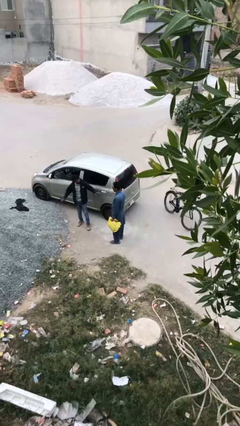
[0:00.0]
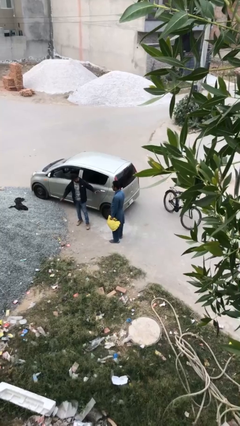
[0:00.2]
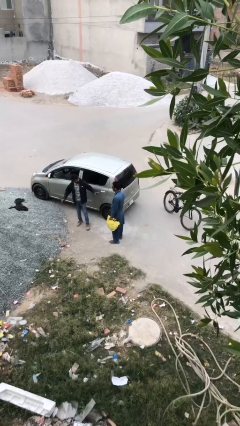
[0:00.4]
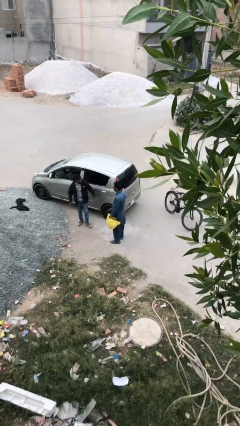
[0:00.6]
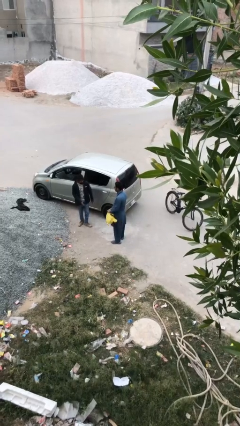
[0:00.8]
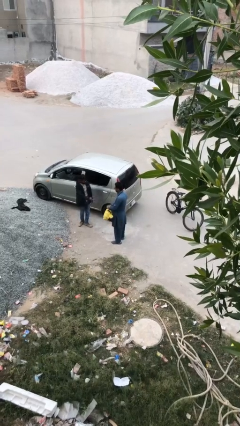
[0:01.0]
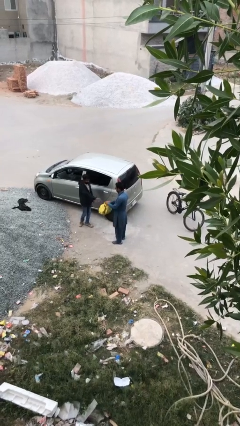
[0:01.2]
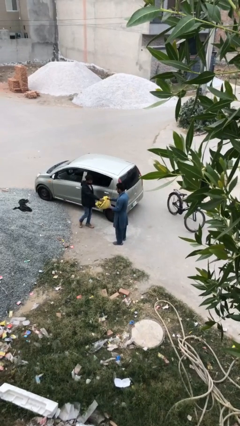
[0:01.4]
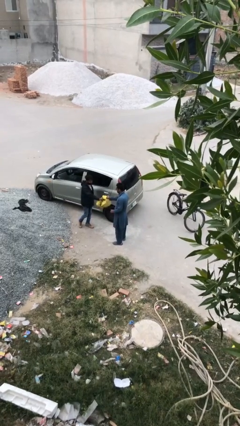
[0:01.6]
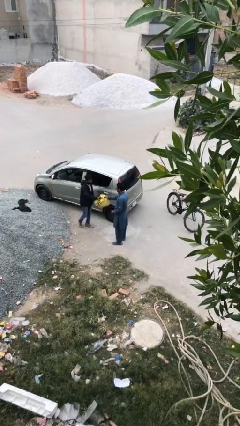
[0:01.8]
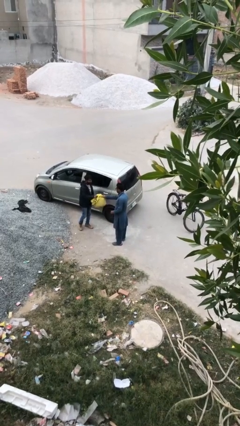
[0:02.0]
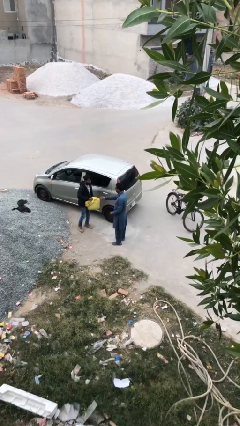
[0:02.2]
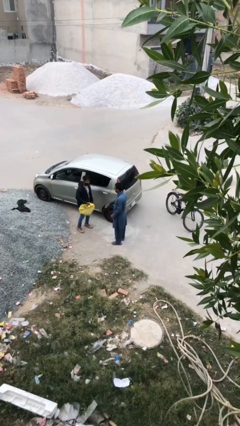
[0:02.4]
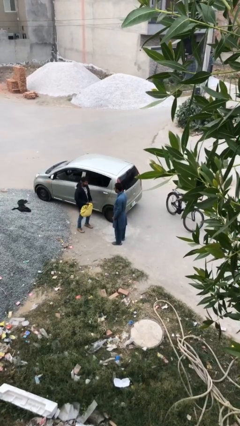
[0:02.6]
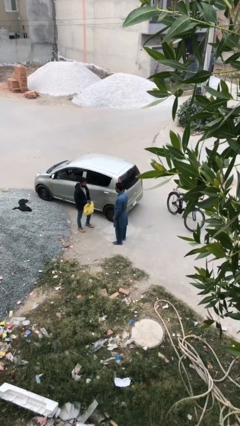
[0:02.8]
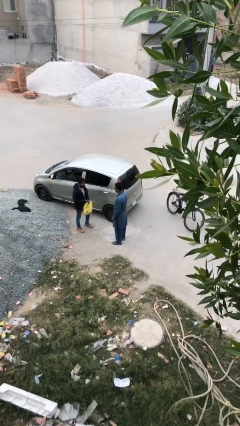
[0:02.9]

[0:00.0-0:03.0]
person transfers object to person

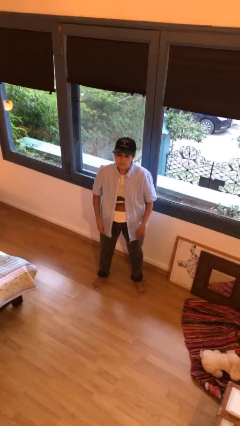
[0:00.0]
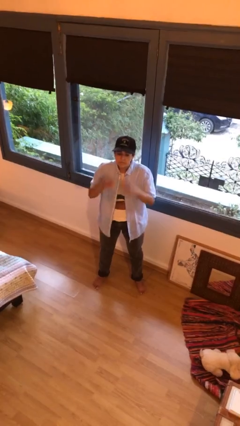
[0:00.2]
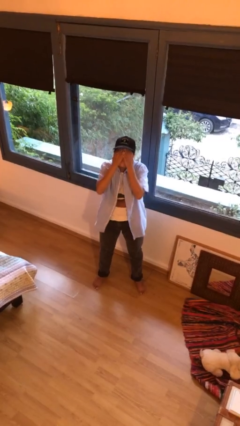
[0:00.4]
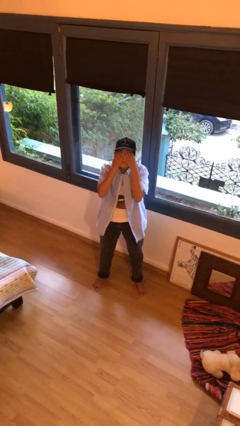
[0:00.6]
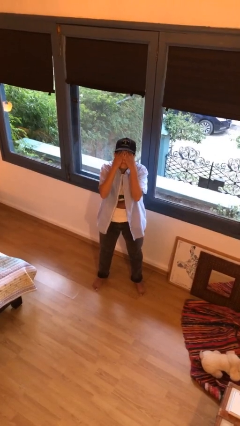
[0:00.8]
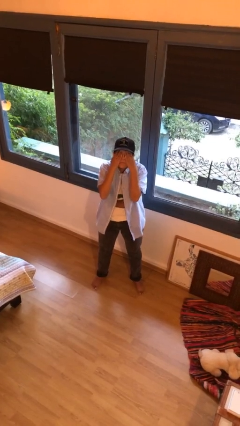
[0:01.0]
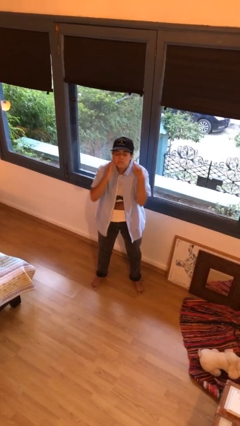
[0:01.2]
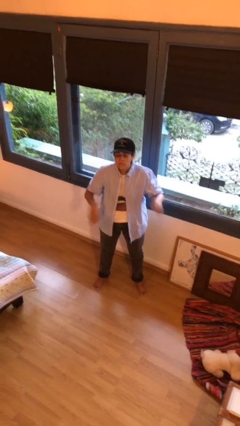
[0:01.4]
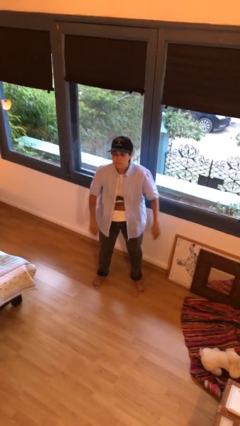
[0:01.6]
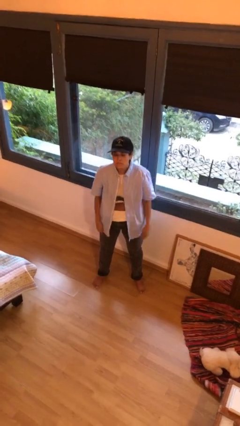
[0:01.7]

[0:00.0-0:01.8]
person rubs eyes

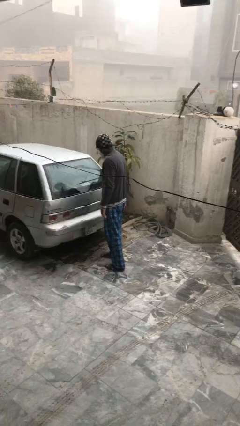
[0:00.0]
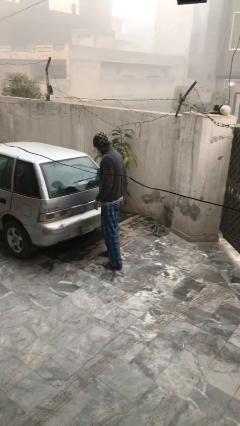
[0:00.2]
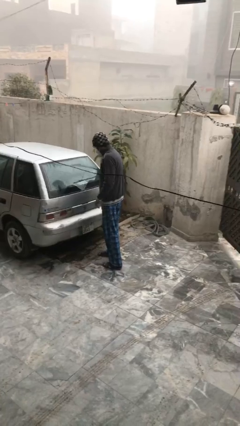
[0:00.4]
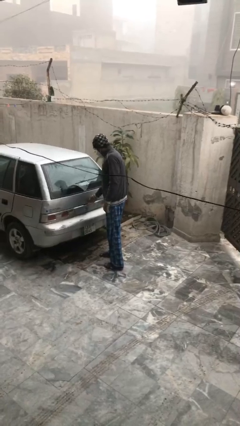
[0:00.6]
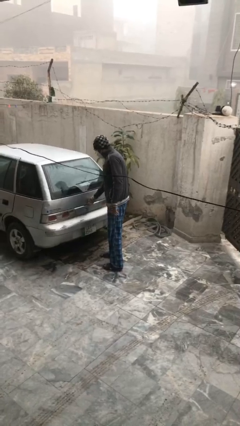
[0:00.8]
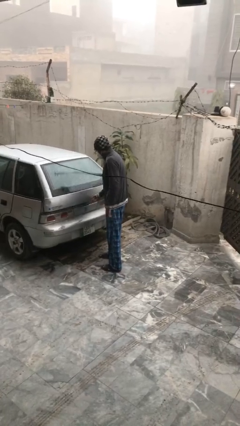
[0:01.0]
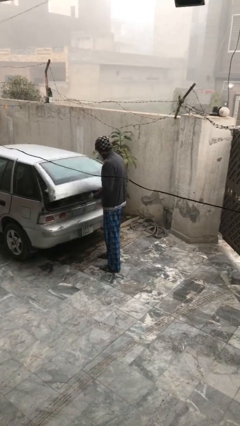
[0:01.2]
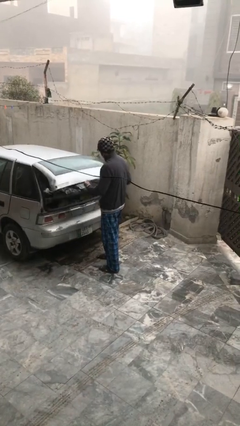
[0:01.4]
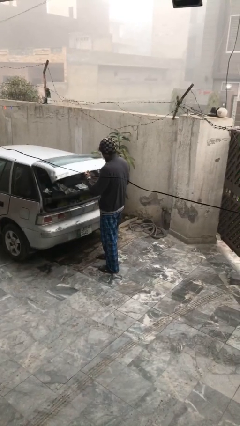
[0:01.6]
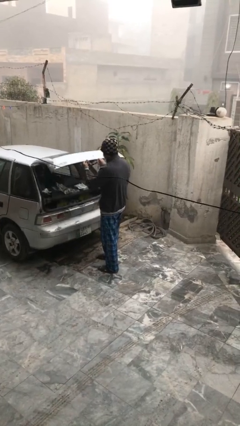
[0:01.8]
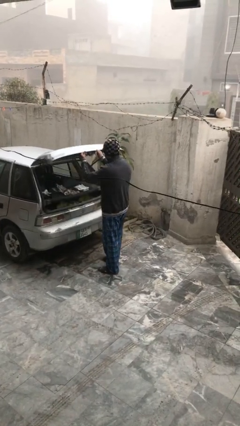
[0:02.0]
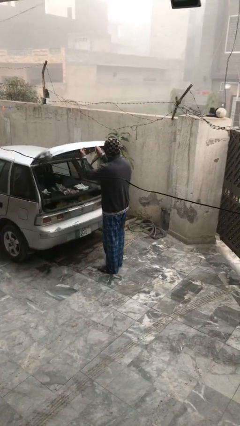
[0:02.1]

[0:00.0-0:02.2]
person opens car trunk

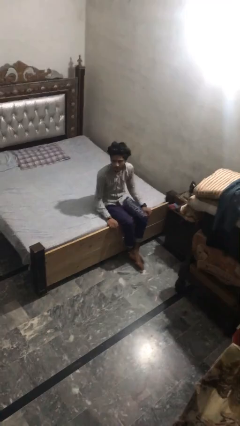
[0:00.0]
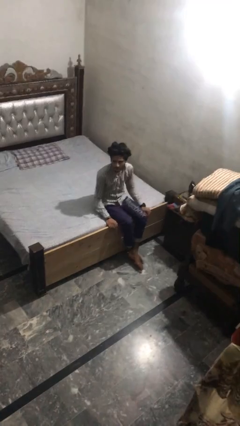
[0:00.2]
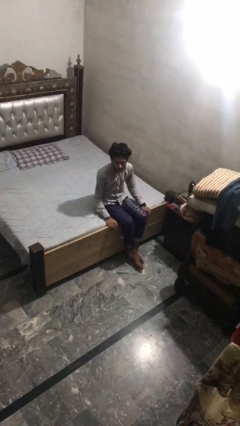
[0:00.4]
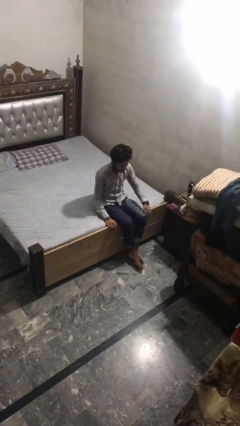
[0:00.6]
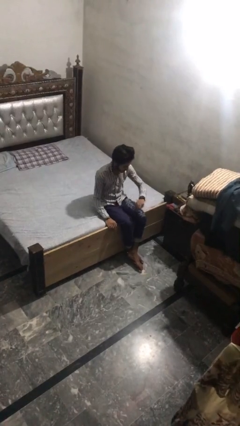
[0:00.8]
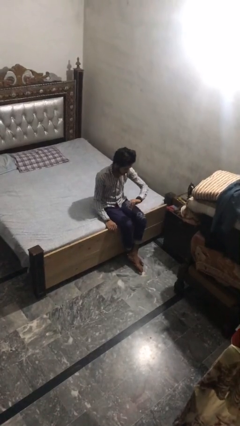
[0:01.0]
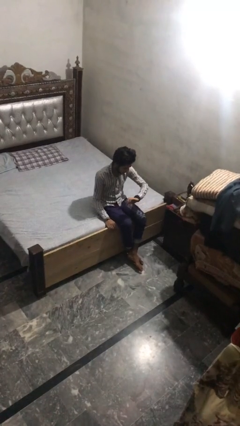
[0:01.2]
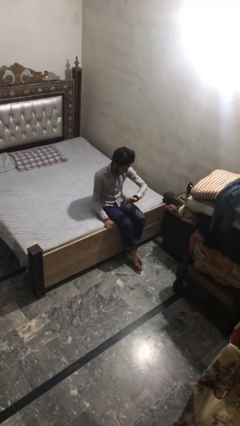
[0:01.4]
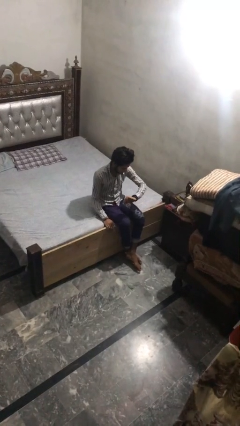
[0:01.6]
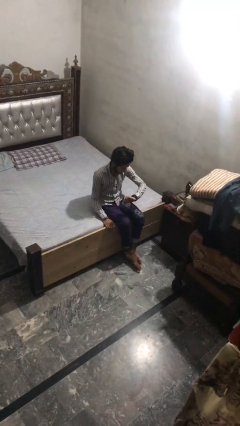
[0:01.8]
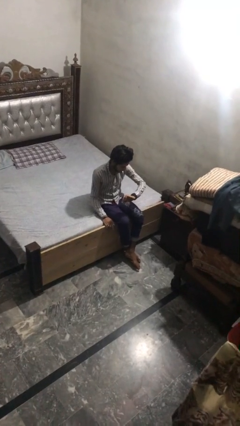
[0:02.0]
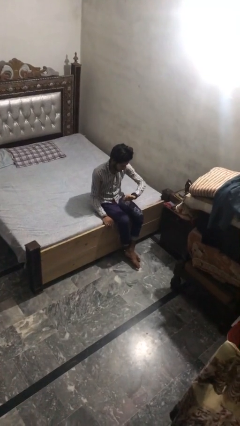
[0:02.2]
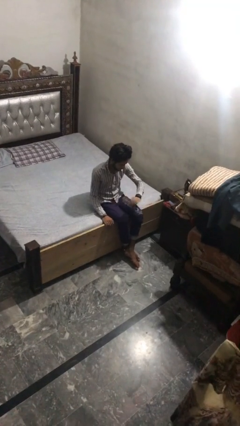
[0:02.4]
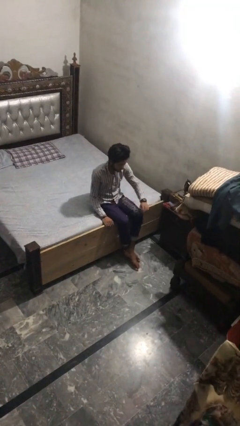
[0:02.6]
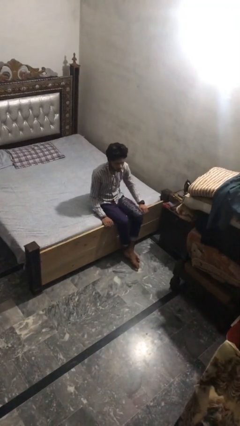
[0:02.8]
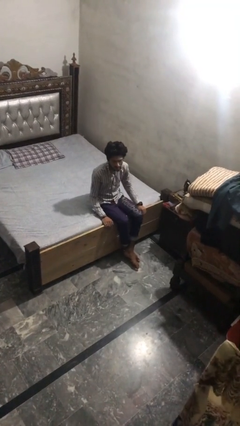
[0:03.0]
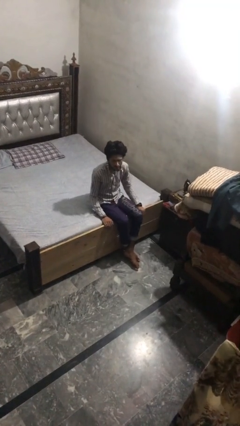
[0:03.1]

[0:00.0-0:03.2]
person looks at wristwatch

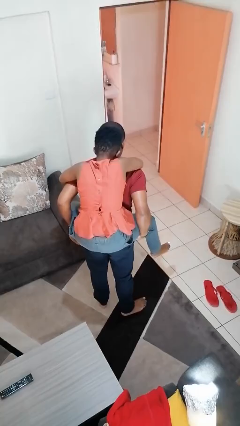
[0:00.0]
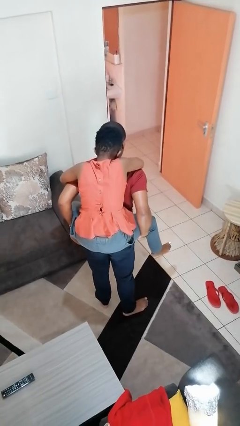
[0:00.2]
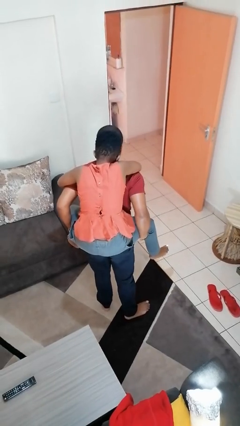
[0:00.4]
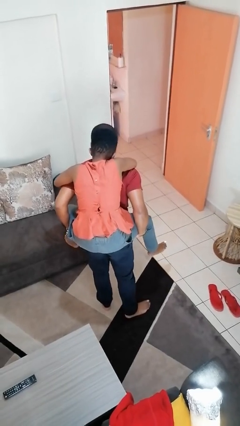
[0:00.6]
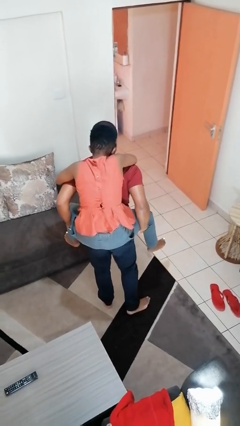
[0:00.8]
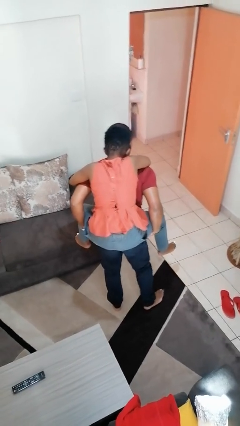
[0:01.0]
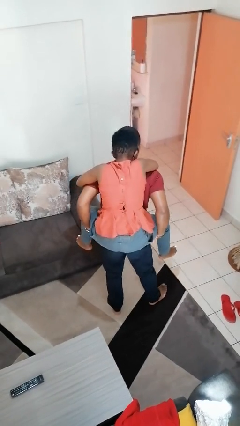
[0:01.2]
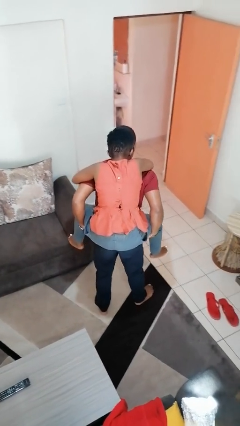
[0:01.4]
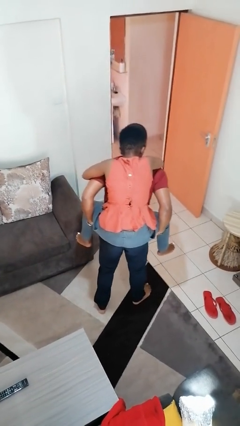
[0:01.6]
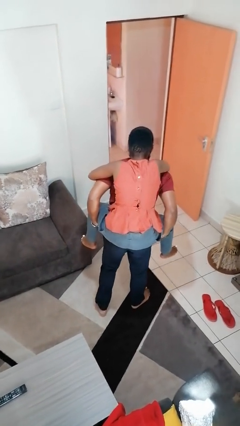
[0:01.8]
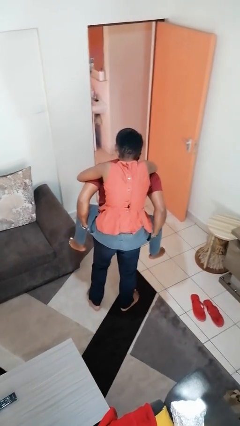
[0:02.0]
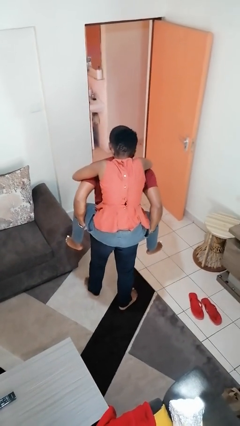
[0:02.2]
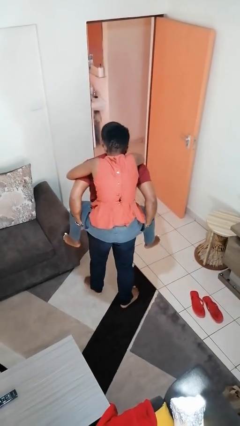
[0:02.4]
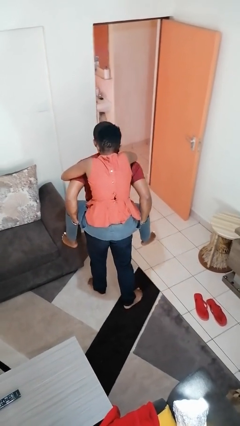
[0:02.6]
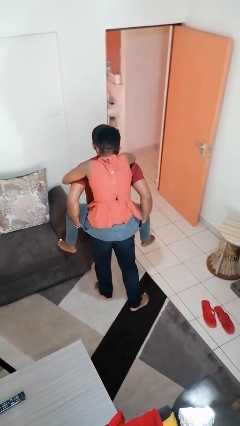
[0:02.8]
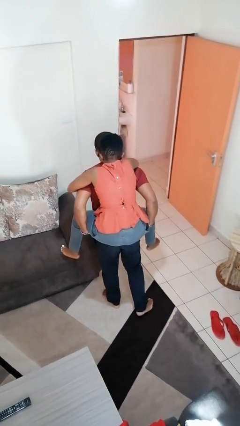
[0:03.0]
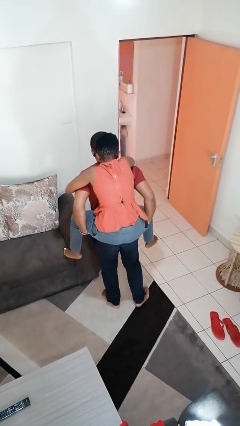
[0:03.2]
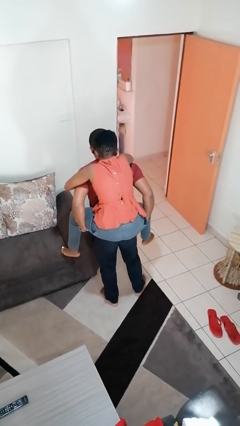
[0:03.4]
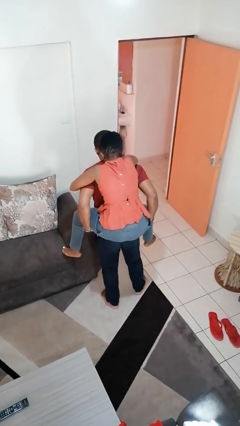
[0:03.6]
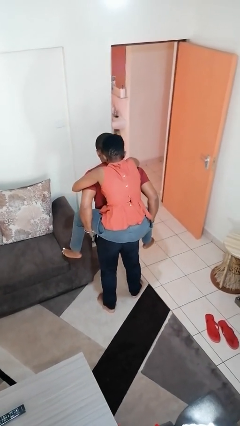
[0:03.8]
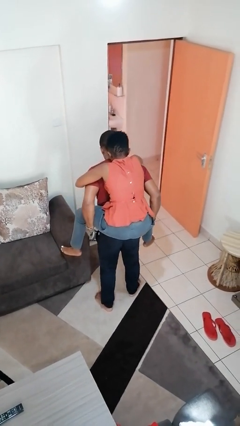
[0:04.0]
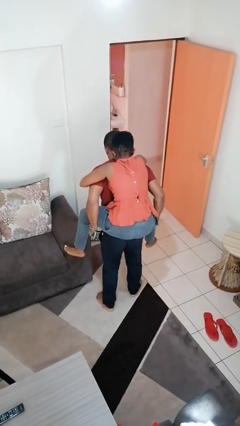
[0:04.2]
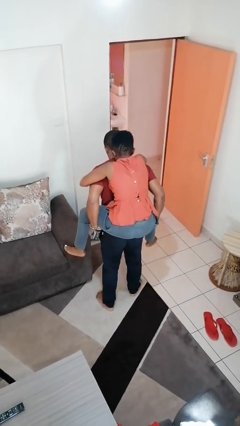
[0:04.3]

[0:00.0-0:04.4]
person carries person on back

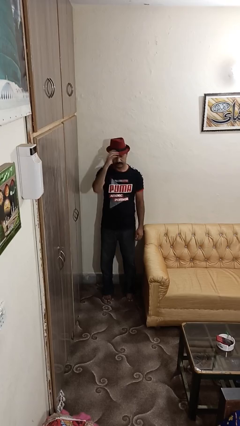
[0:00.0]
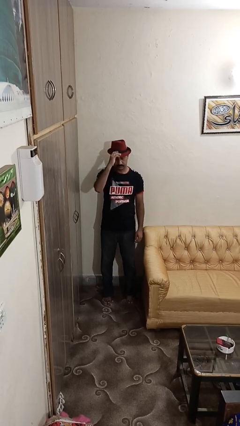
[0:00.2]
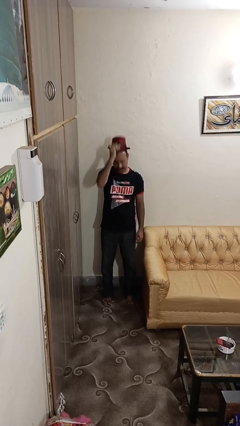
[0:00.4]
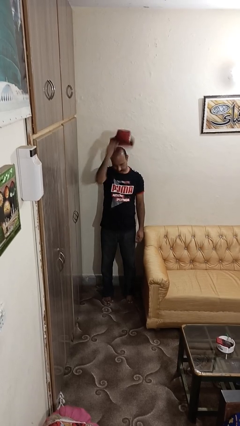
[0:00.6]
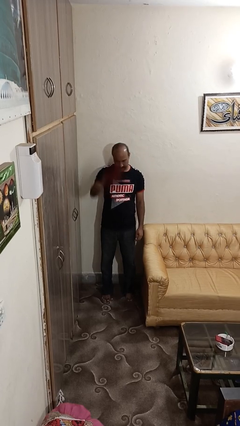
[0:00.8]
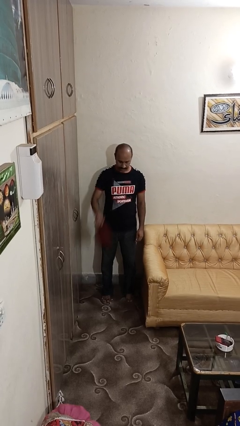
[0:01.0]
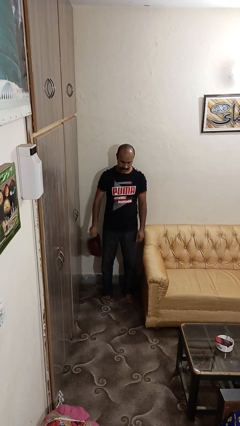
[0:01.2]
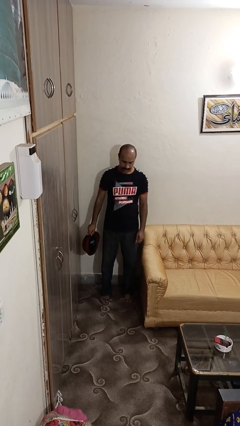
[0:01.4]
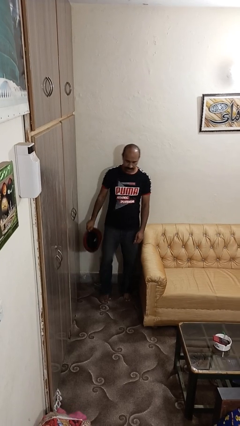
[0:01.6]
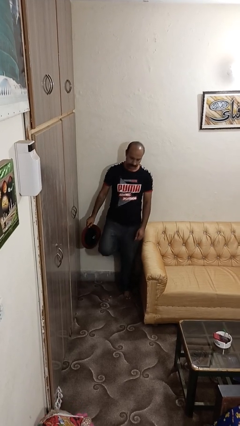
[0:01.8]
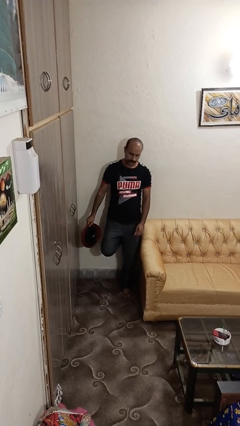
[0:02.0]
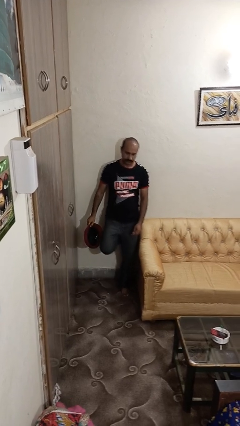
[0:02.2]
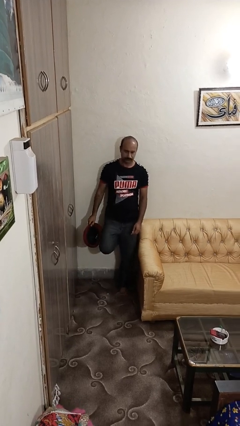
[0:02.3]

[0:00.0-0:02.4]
person takes off hat

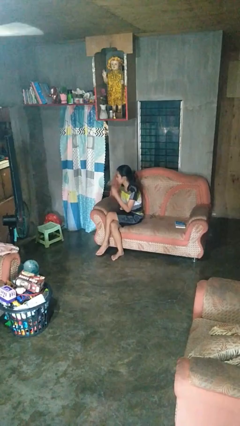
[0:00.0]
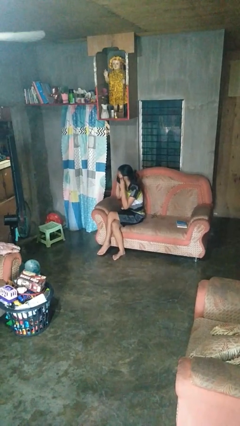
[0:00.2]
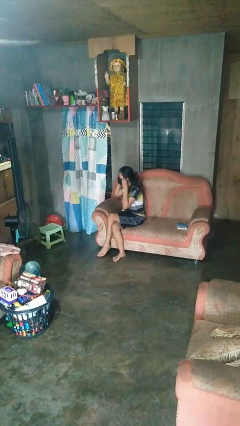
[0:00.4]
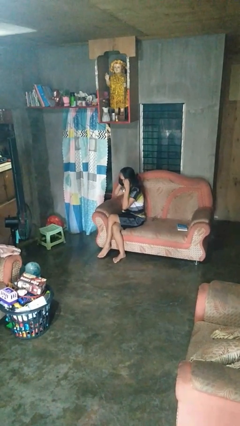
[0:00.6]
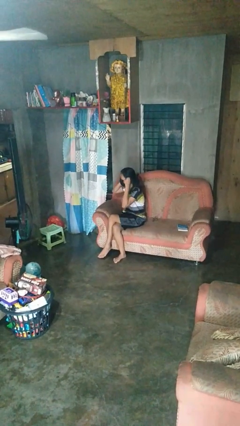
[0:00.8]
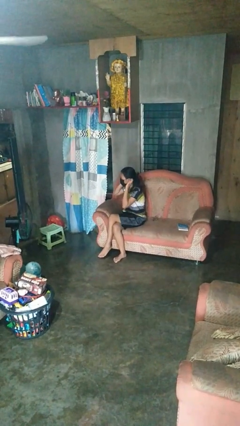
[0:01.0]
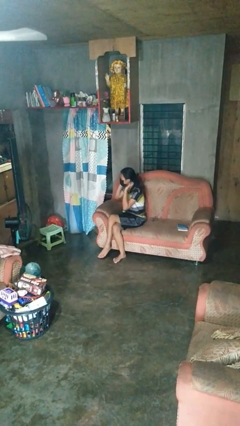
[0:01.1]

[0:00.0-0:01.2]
person puts on facemask
